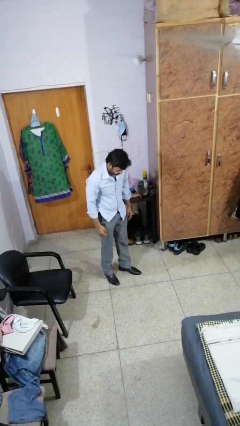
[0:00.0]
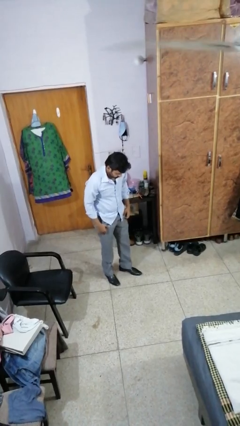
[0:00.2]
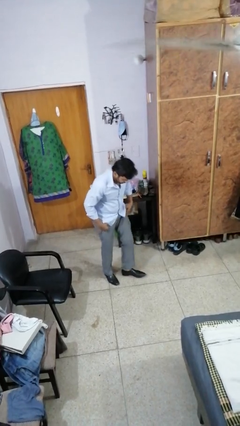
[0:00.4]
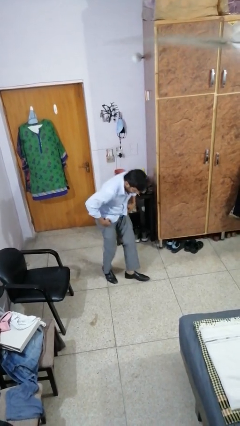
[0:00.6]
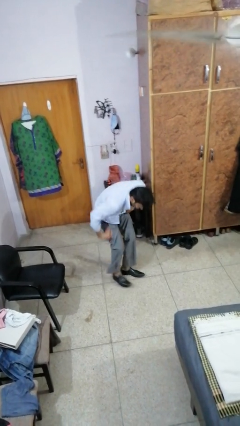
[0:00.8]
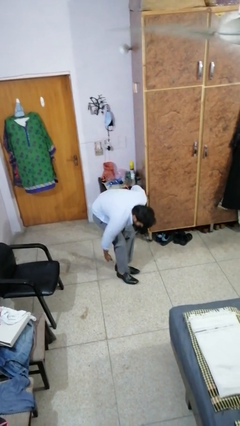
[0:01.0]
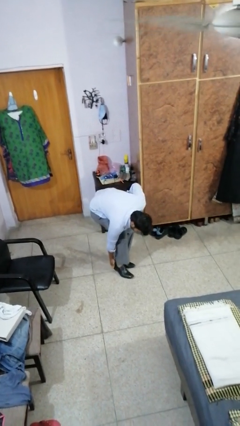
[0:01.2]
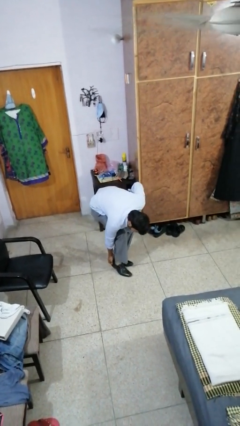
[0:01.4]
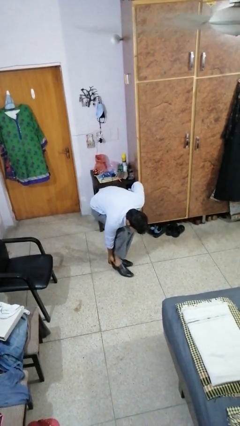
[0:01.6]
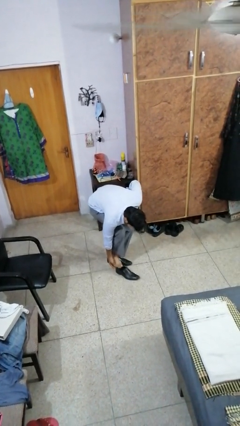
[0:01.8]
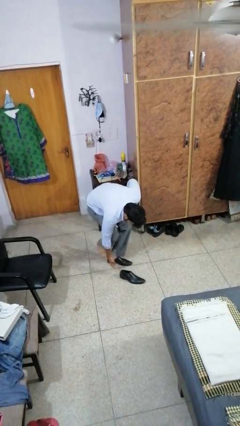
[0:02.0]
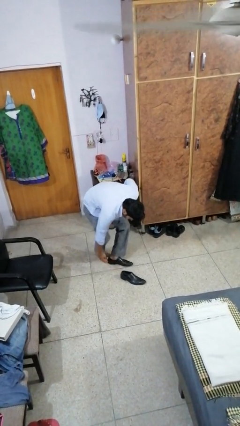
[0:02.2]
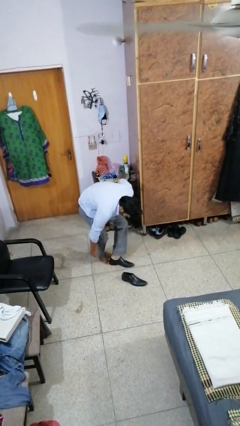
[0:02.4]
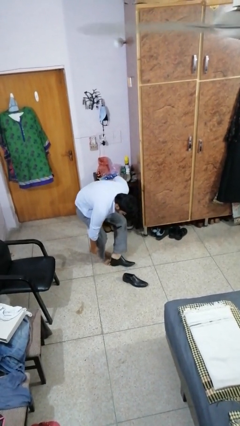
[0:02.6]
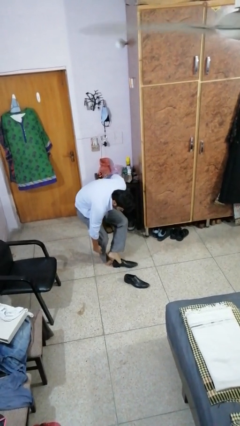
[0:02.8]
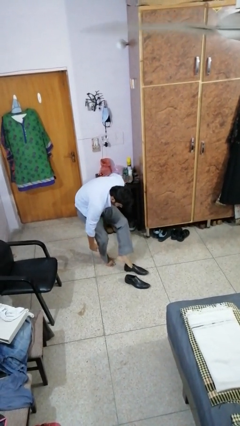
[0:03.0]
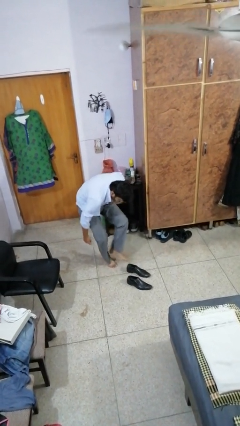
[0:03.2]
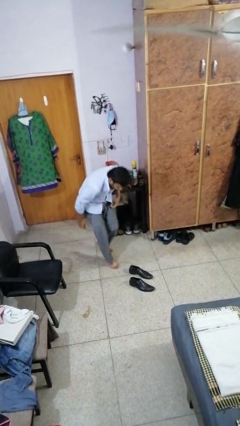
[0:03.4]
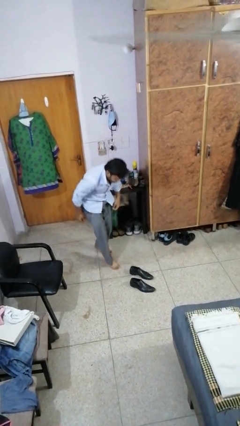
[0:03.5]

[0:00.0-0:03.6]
person takes off shoes

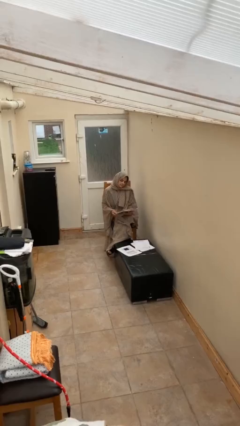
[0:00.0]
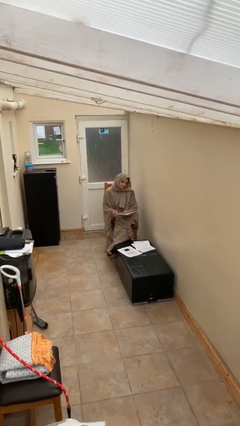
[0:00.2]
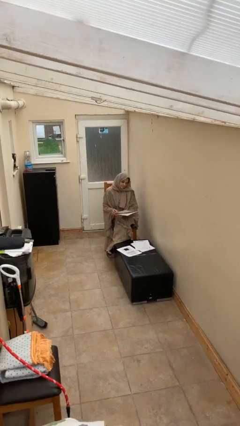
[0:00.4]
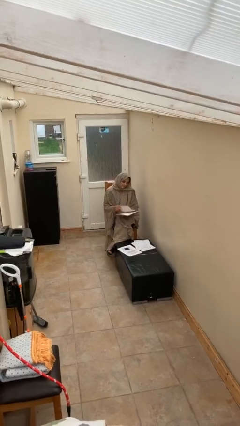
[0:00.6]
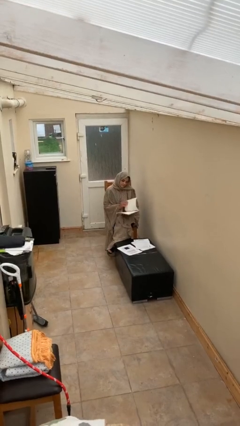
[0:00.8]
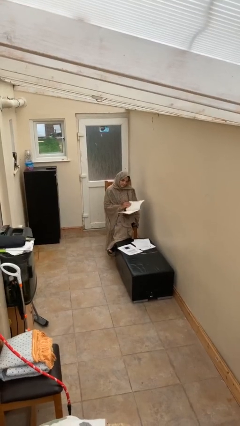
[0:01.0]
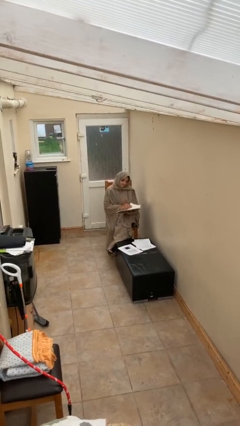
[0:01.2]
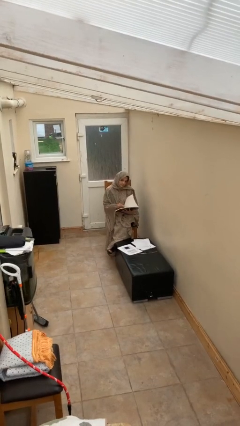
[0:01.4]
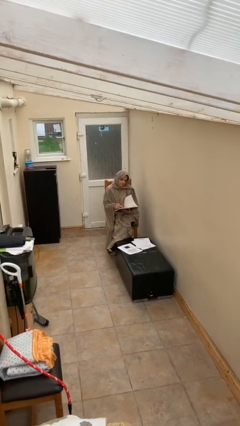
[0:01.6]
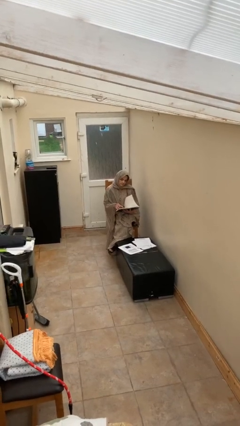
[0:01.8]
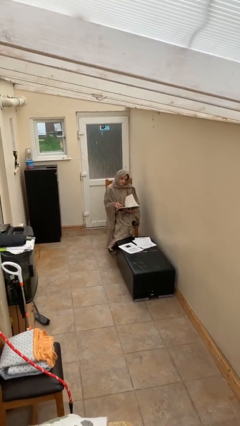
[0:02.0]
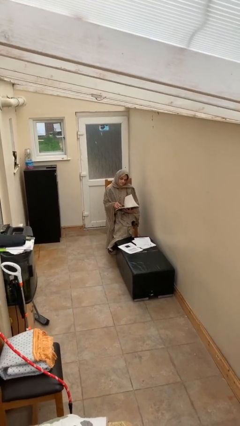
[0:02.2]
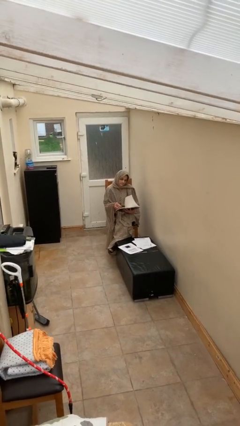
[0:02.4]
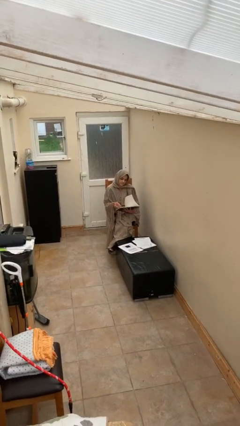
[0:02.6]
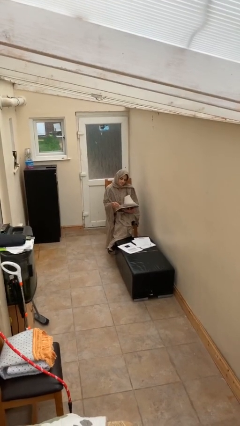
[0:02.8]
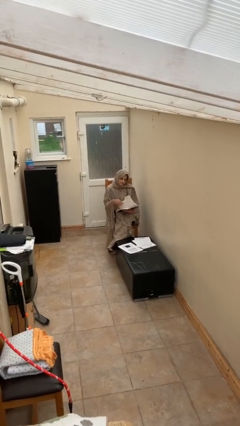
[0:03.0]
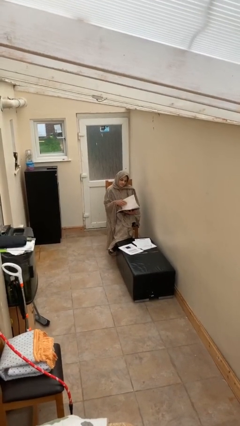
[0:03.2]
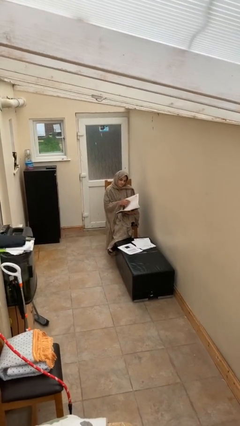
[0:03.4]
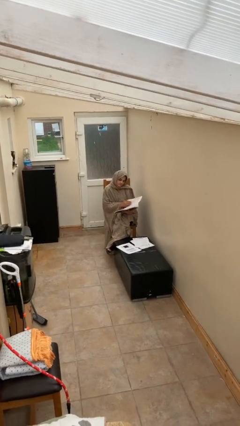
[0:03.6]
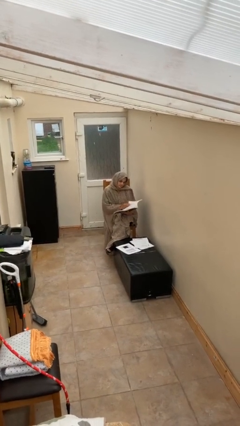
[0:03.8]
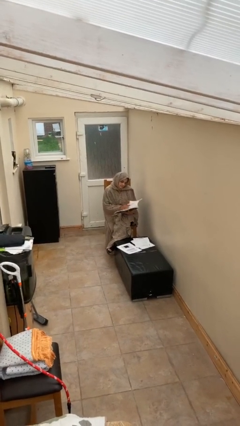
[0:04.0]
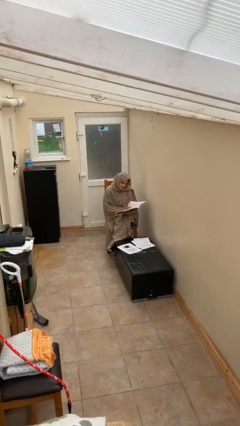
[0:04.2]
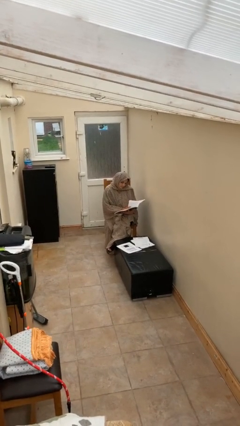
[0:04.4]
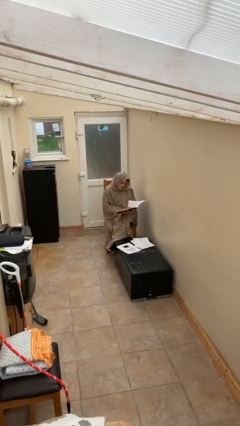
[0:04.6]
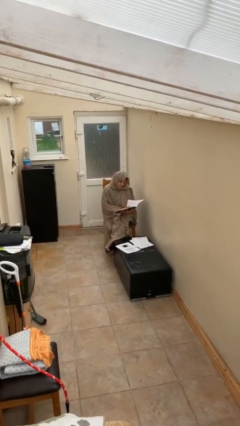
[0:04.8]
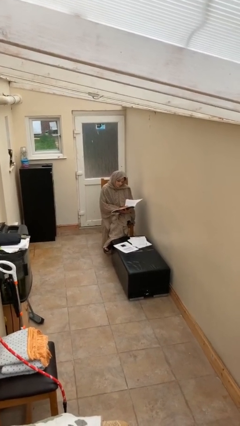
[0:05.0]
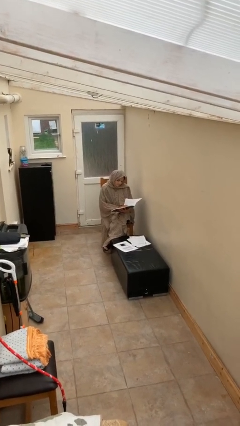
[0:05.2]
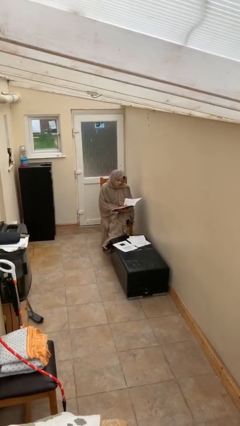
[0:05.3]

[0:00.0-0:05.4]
person reads document

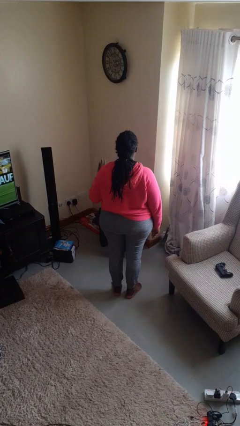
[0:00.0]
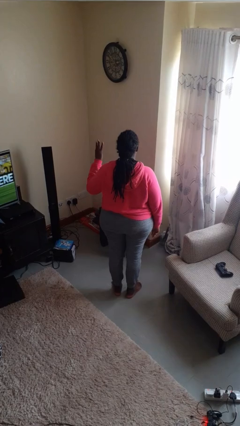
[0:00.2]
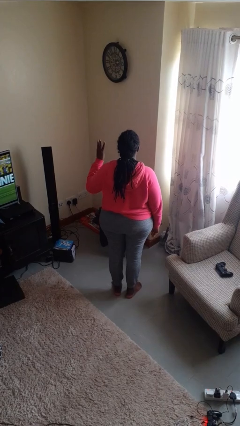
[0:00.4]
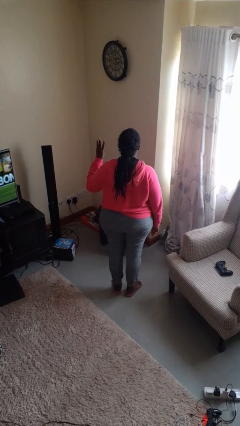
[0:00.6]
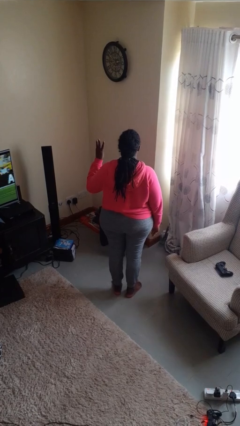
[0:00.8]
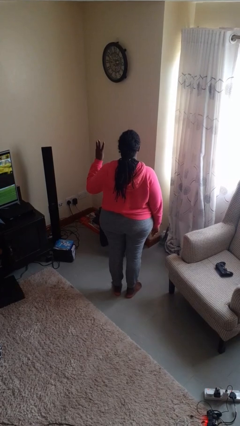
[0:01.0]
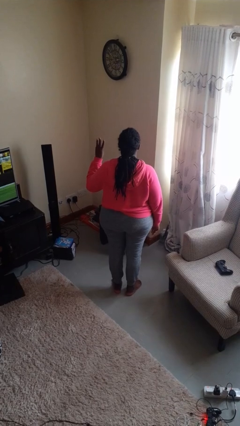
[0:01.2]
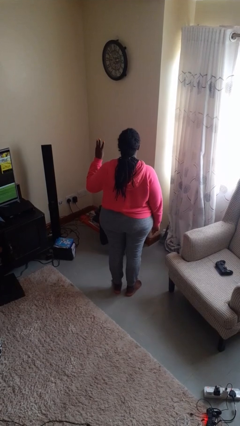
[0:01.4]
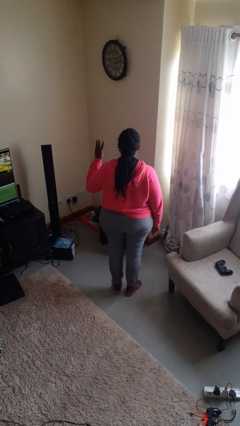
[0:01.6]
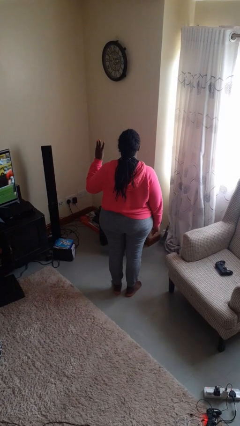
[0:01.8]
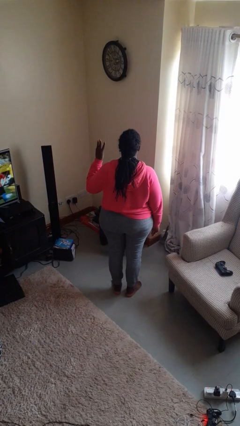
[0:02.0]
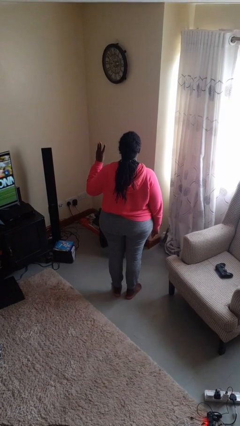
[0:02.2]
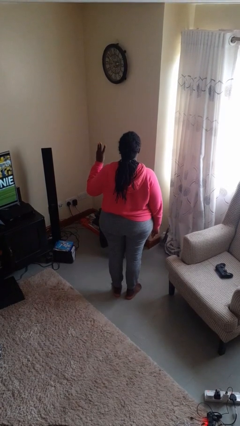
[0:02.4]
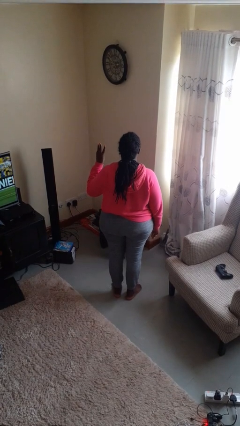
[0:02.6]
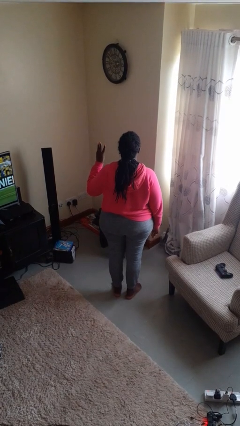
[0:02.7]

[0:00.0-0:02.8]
person gestures number three

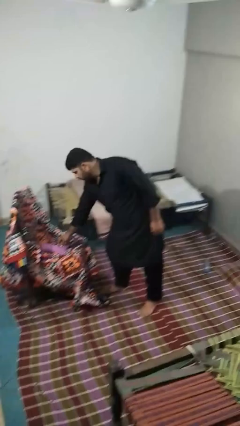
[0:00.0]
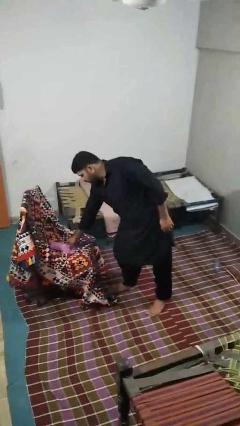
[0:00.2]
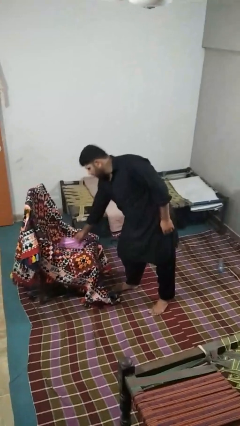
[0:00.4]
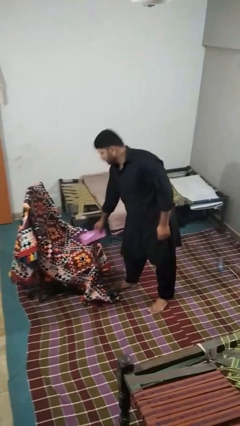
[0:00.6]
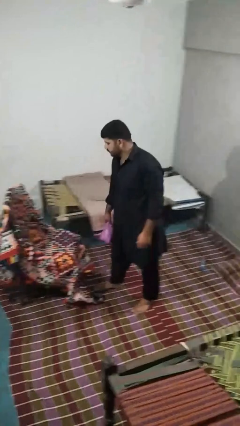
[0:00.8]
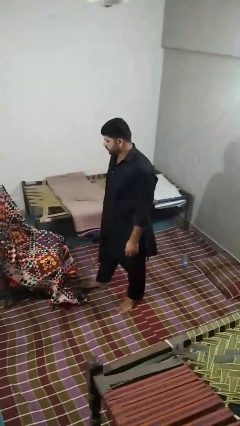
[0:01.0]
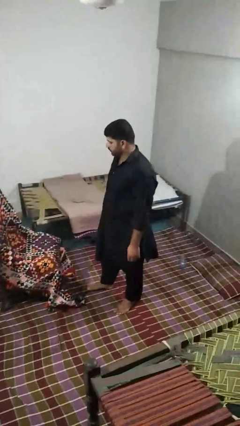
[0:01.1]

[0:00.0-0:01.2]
person picks up object from couch

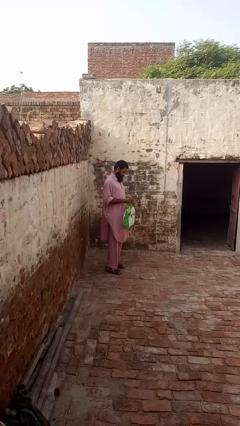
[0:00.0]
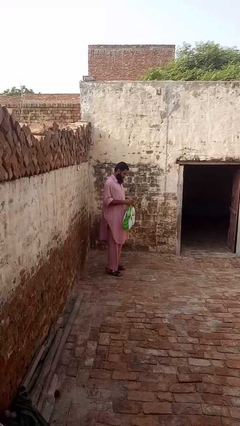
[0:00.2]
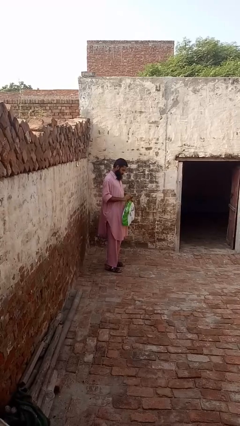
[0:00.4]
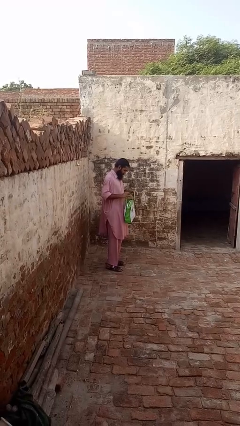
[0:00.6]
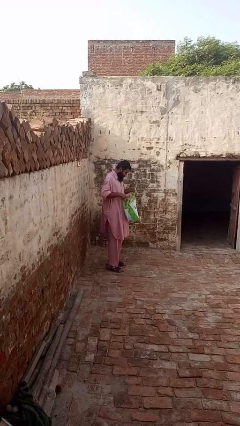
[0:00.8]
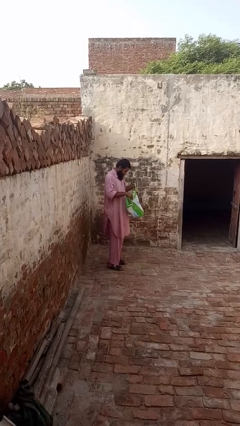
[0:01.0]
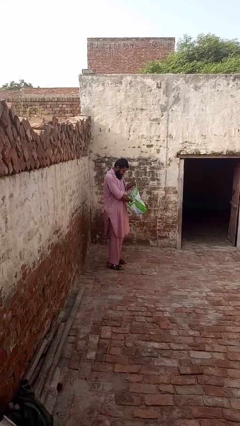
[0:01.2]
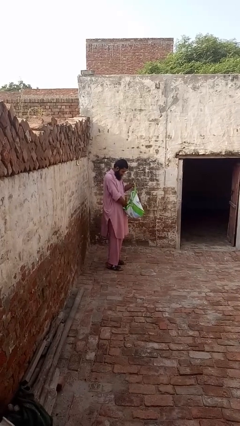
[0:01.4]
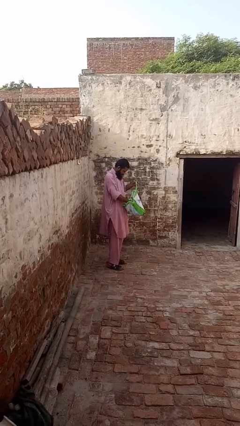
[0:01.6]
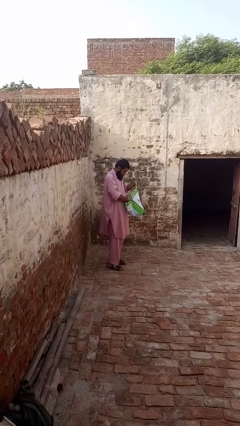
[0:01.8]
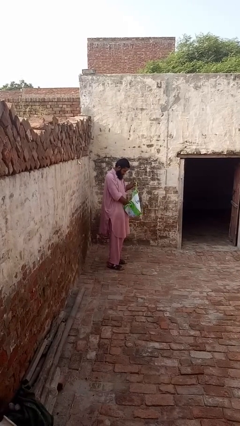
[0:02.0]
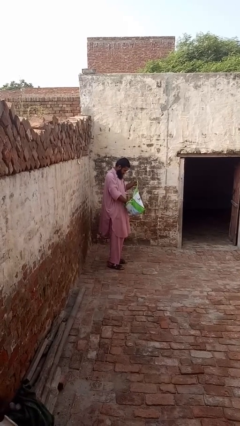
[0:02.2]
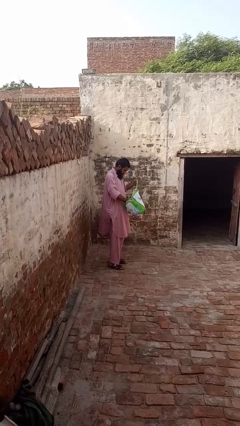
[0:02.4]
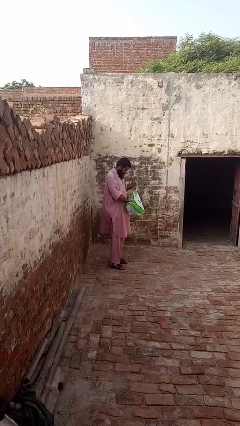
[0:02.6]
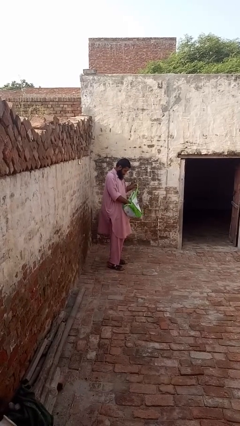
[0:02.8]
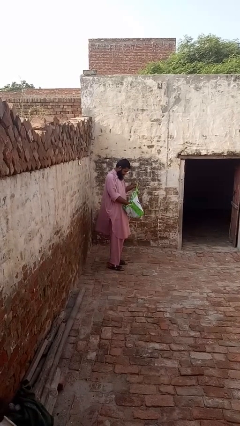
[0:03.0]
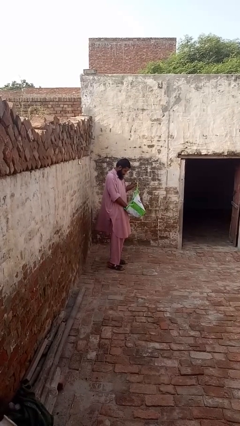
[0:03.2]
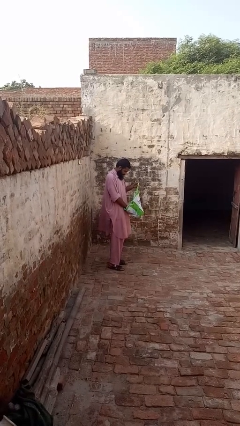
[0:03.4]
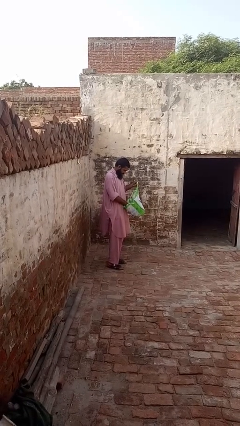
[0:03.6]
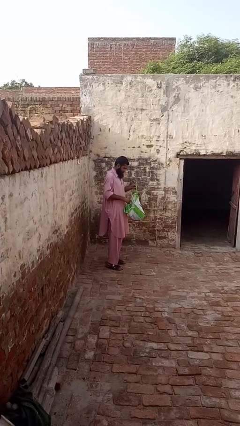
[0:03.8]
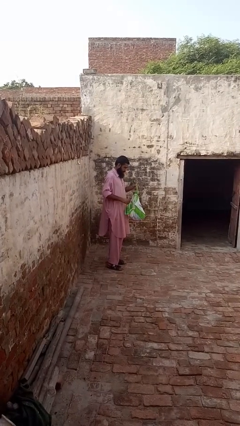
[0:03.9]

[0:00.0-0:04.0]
person searches in bag

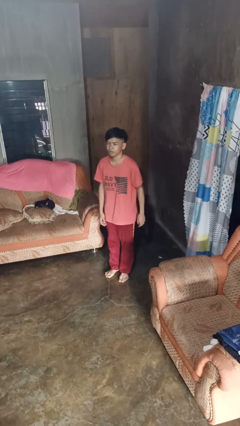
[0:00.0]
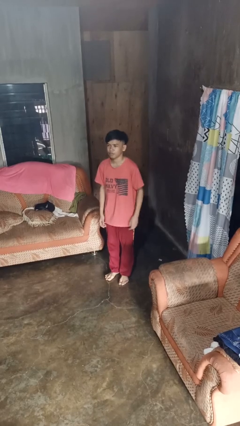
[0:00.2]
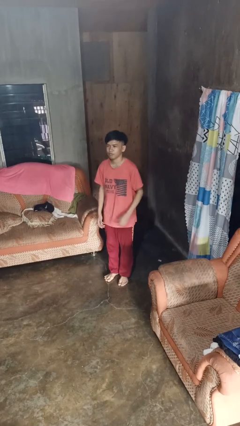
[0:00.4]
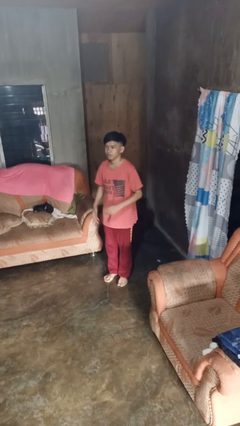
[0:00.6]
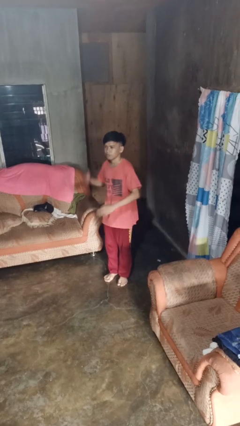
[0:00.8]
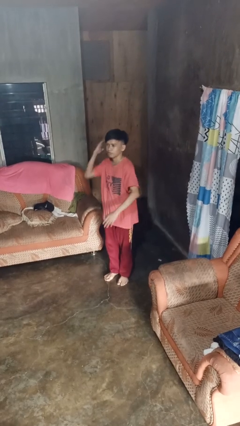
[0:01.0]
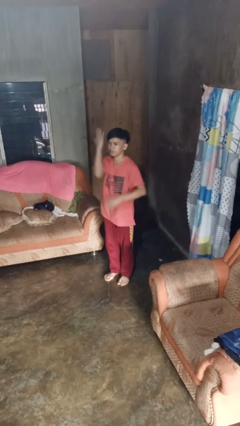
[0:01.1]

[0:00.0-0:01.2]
person karate chop
